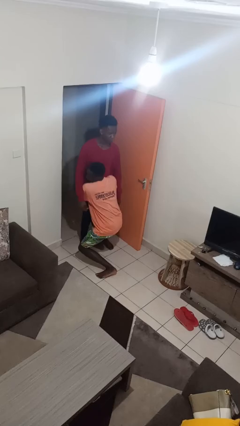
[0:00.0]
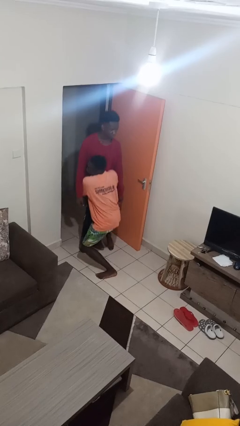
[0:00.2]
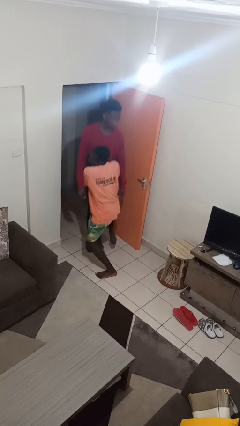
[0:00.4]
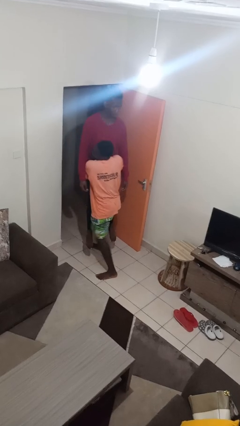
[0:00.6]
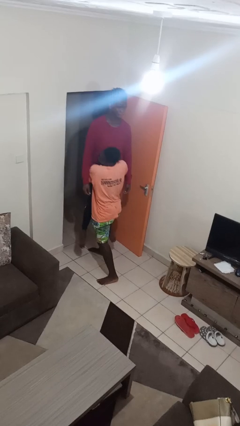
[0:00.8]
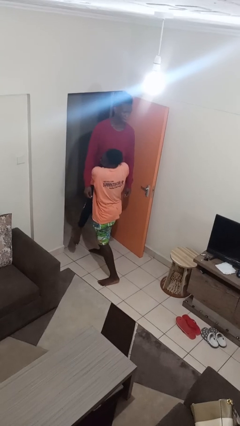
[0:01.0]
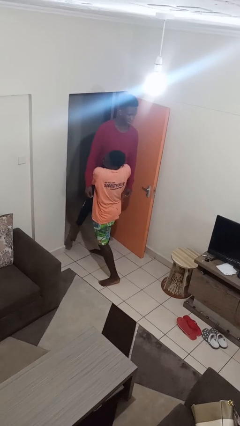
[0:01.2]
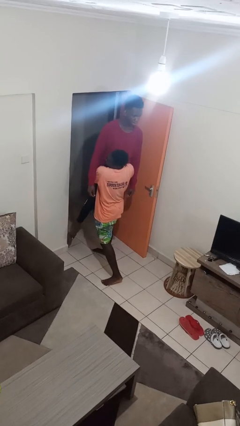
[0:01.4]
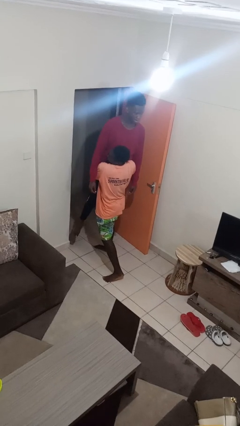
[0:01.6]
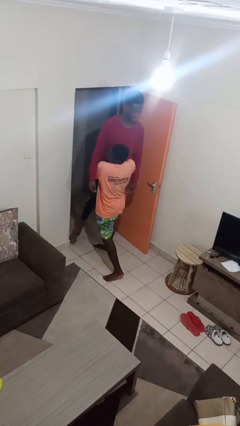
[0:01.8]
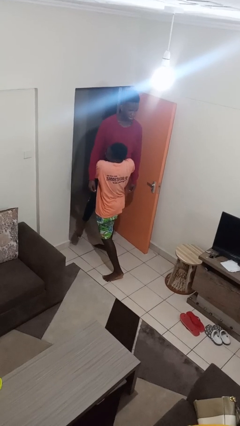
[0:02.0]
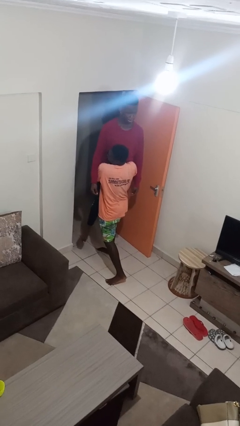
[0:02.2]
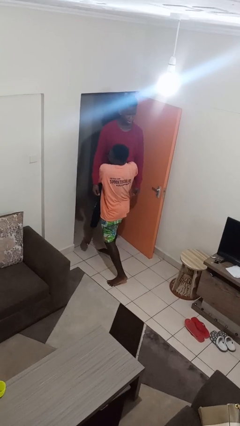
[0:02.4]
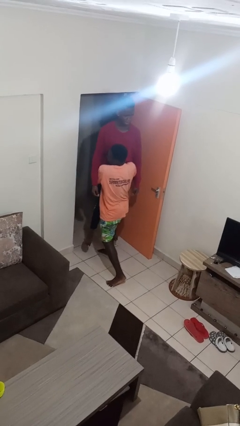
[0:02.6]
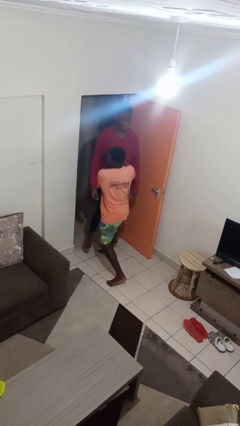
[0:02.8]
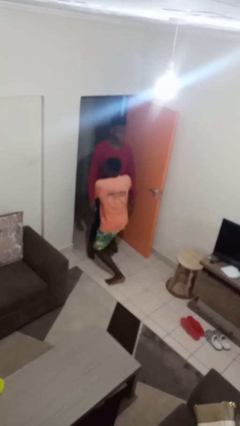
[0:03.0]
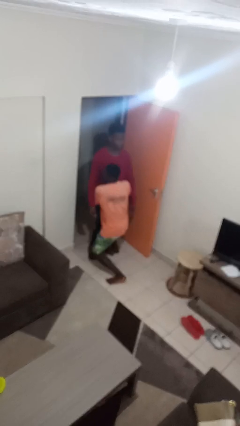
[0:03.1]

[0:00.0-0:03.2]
person picks up person

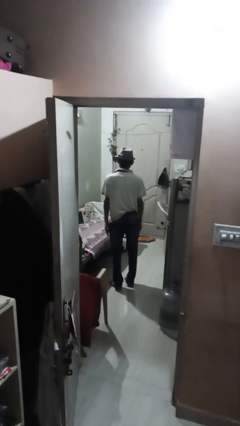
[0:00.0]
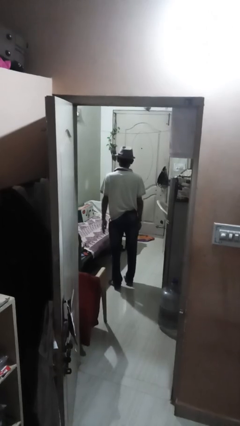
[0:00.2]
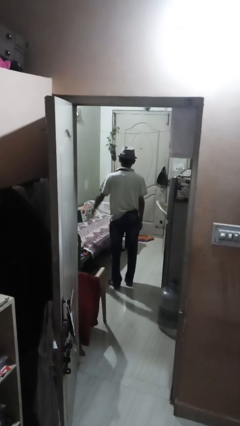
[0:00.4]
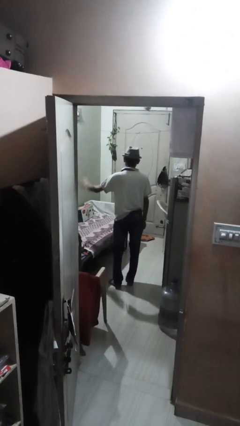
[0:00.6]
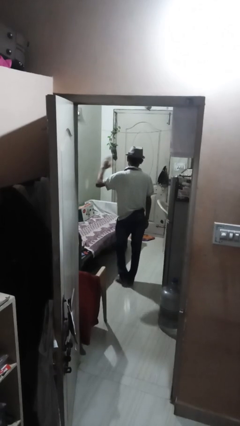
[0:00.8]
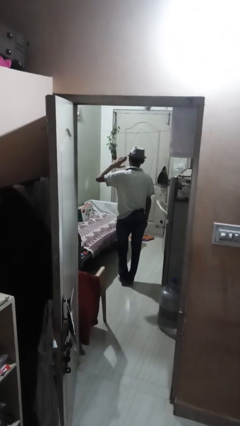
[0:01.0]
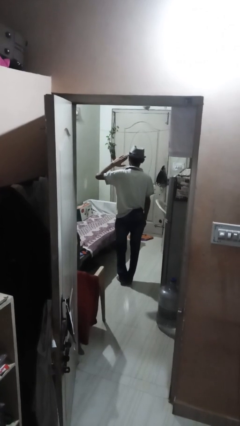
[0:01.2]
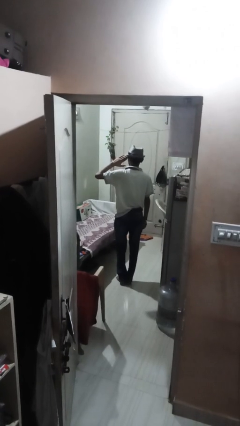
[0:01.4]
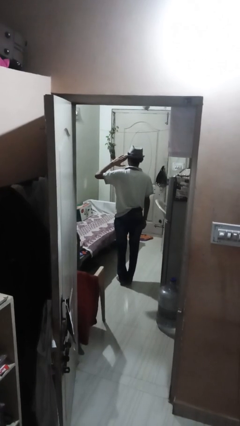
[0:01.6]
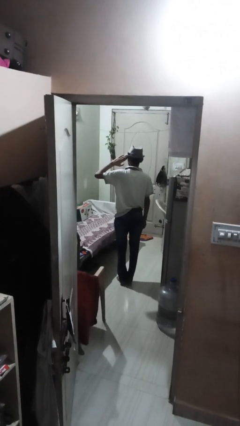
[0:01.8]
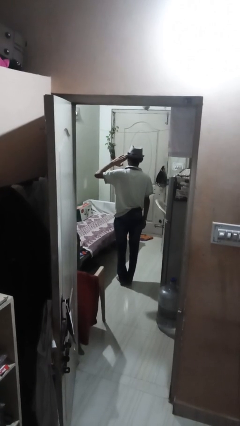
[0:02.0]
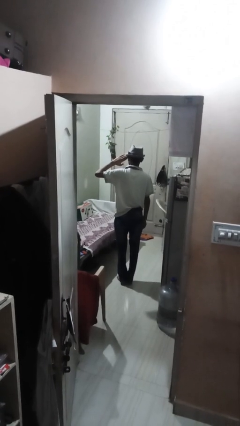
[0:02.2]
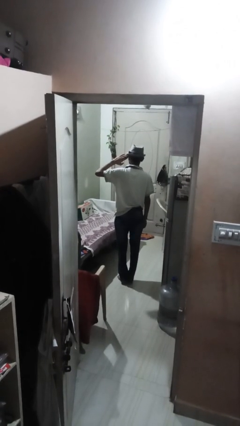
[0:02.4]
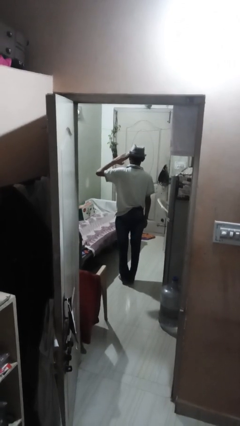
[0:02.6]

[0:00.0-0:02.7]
person salutes

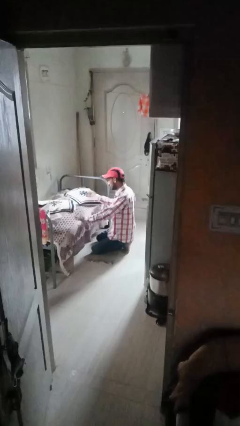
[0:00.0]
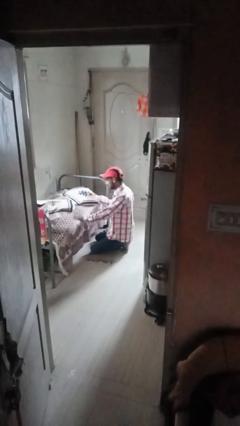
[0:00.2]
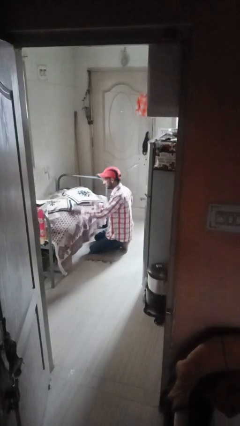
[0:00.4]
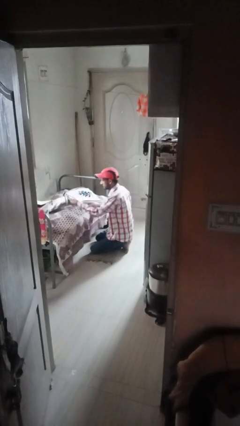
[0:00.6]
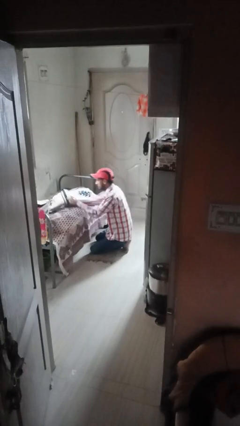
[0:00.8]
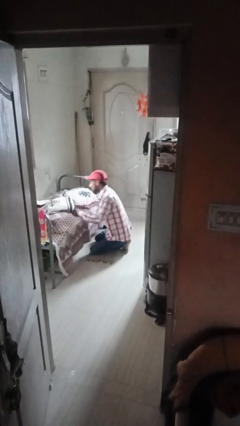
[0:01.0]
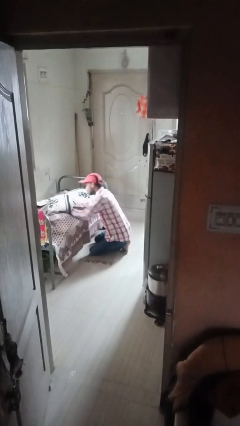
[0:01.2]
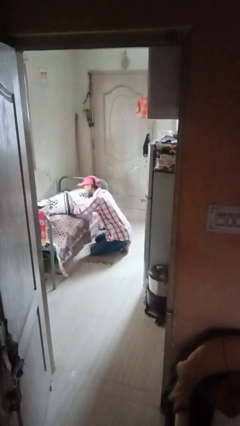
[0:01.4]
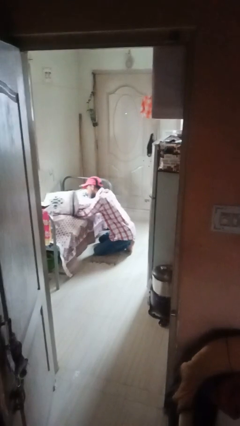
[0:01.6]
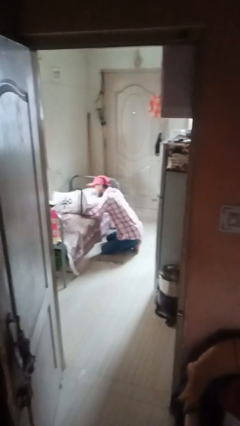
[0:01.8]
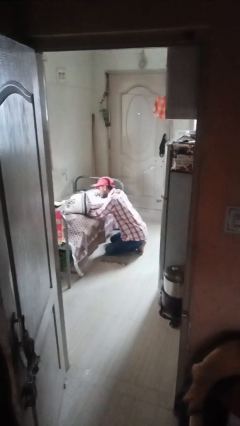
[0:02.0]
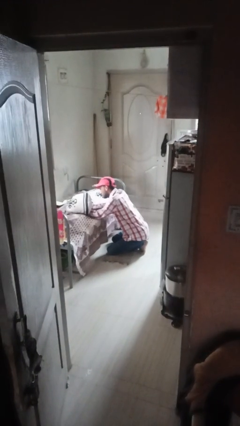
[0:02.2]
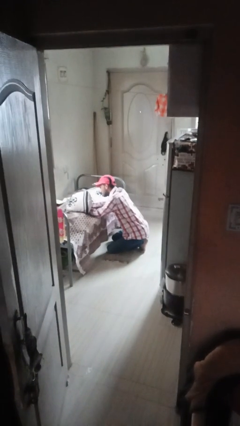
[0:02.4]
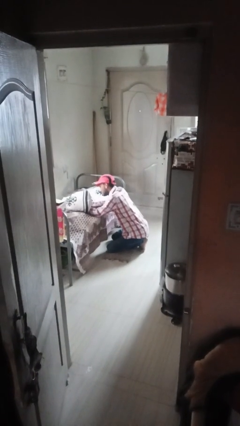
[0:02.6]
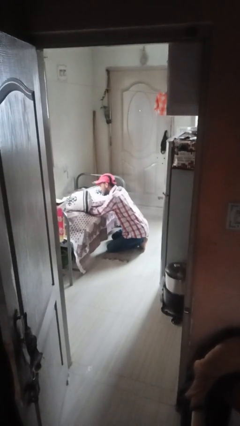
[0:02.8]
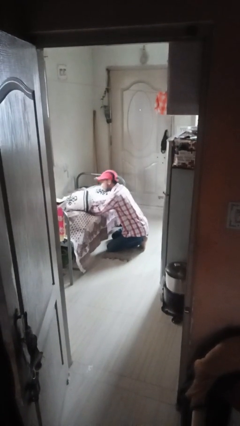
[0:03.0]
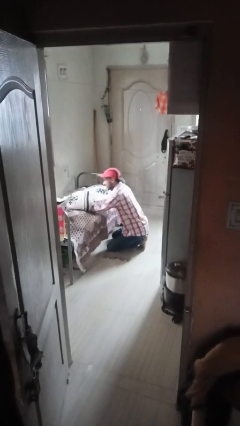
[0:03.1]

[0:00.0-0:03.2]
person searches in couch

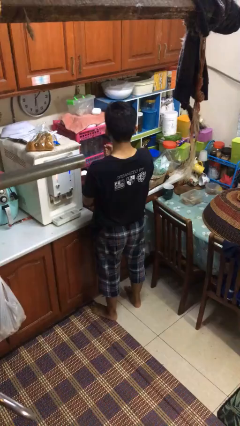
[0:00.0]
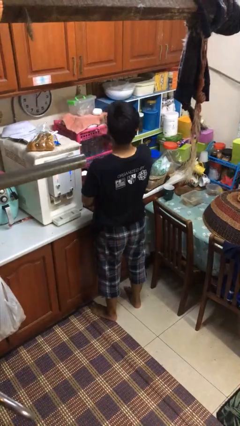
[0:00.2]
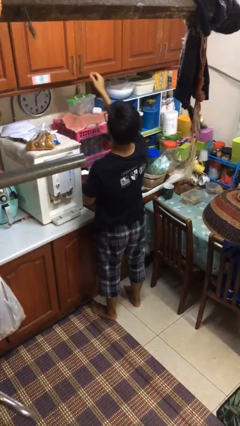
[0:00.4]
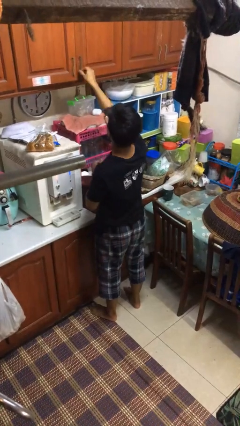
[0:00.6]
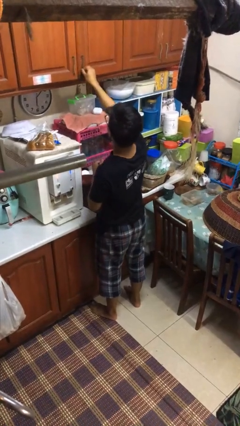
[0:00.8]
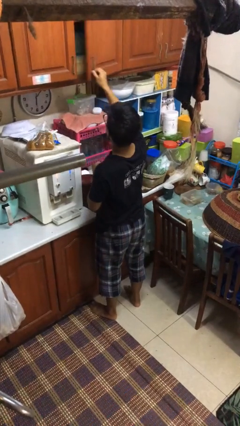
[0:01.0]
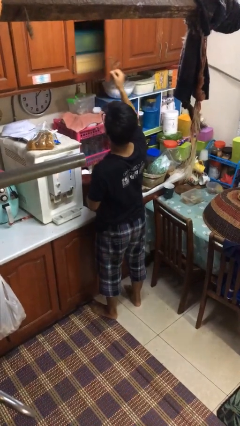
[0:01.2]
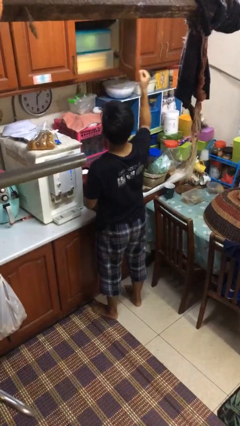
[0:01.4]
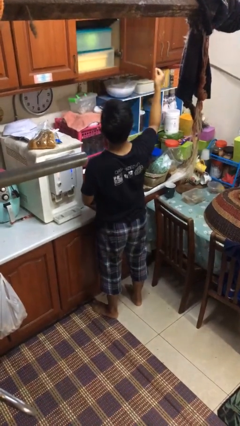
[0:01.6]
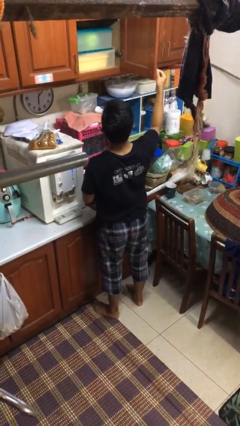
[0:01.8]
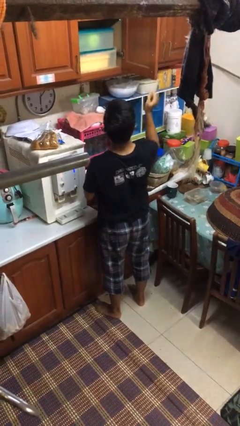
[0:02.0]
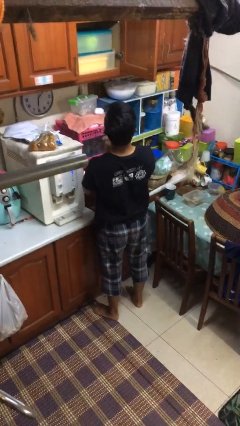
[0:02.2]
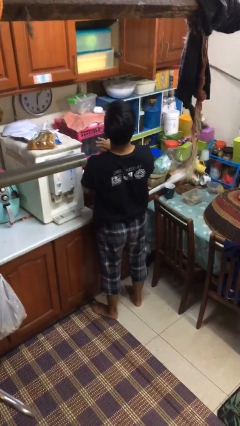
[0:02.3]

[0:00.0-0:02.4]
person opens kitchen drawer

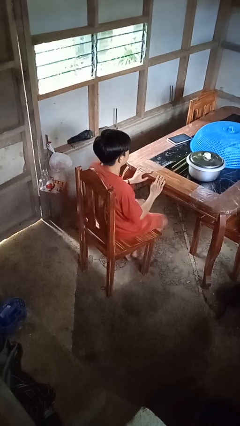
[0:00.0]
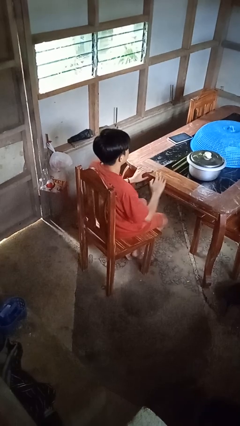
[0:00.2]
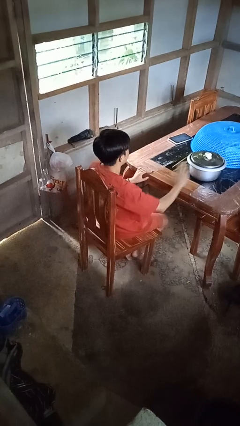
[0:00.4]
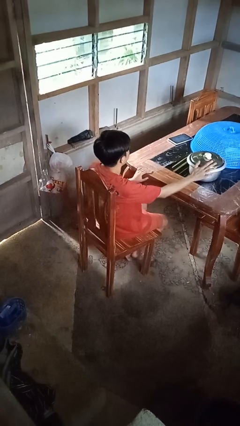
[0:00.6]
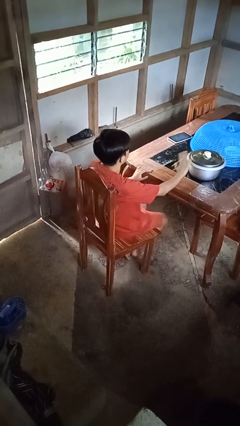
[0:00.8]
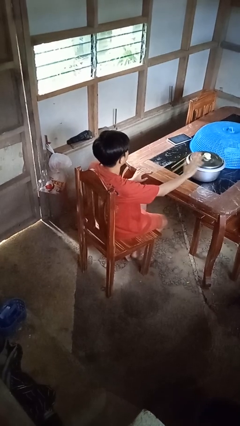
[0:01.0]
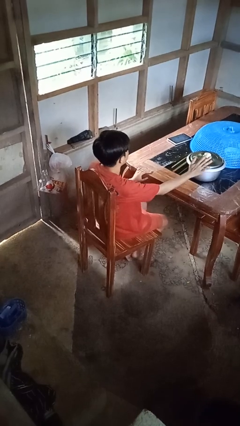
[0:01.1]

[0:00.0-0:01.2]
person waves hand over object

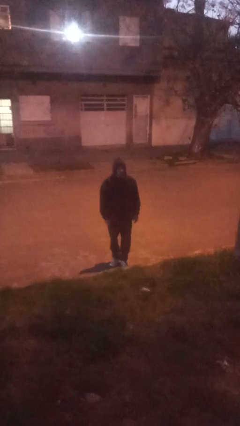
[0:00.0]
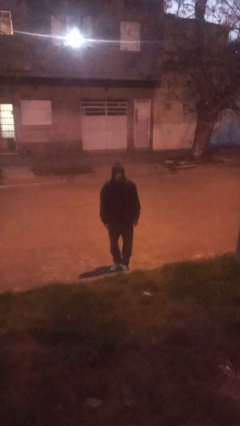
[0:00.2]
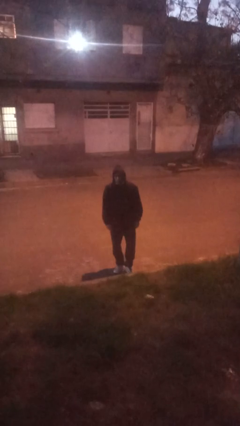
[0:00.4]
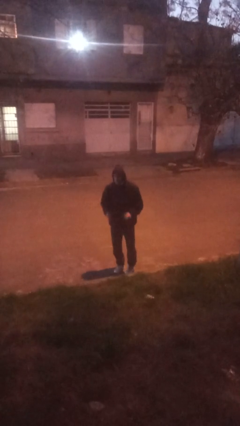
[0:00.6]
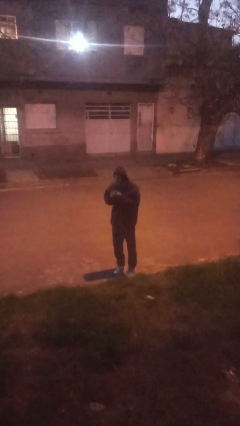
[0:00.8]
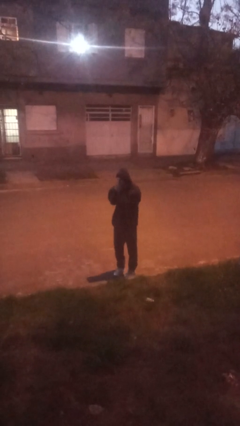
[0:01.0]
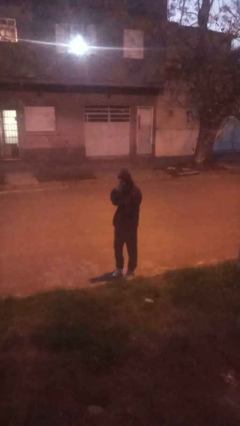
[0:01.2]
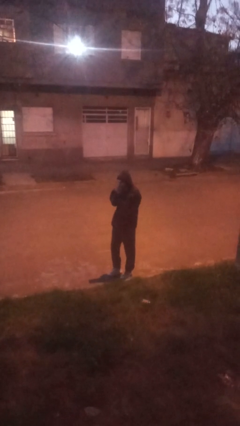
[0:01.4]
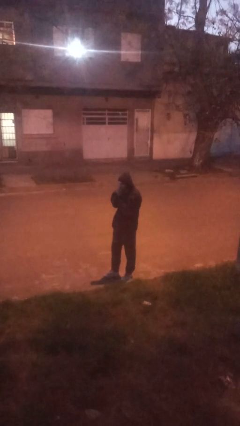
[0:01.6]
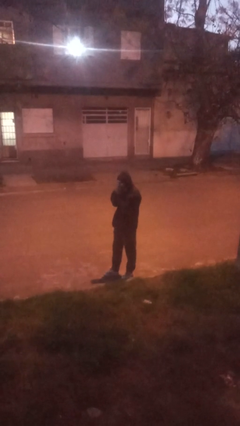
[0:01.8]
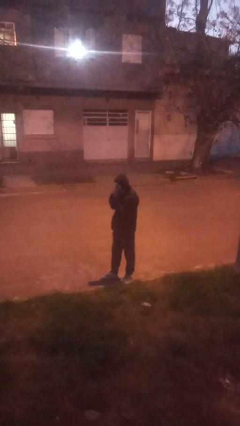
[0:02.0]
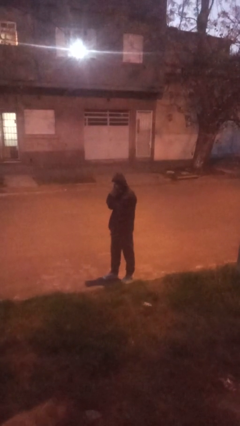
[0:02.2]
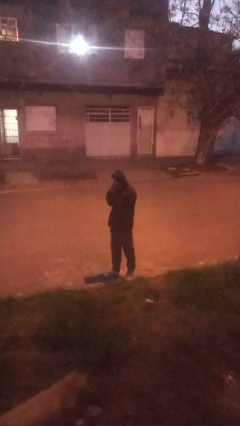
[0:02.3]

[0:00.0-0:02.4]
person blows into hands

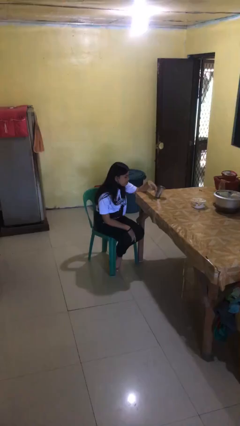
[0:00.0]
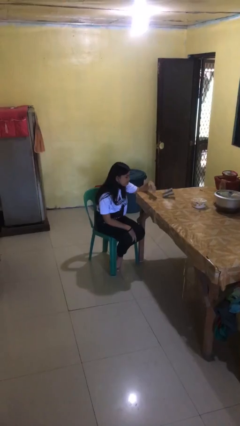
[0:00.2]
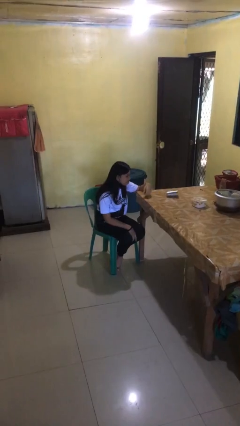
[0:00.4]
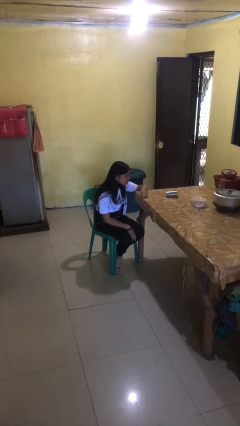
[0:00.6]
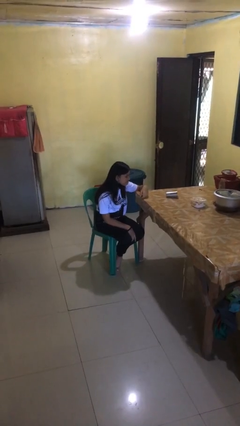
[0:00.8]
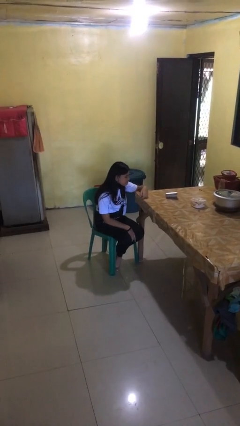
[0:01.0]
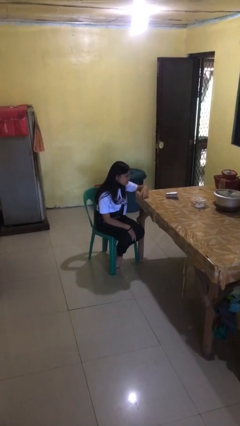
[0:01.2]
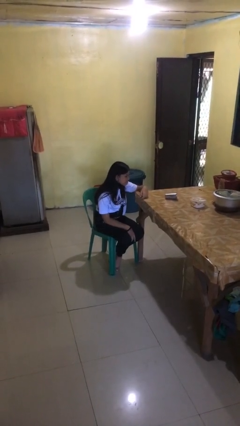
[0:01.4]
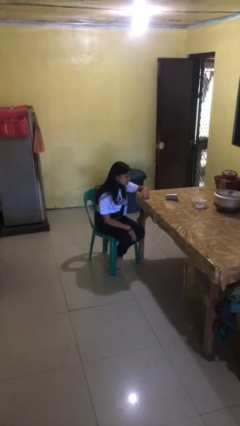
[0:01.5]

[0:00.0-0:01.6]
person knocks over glass
